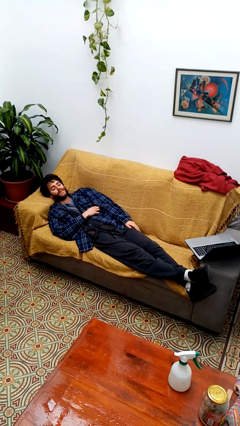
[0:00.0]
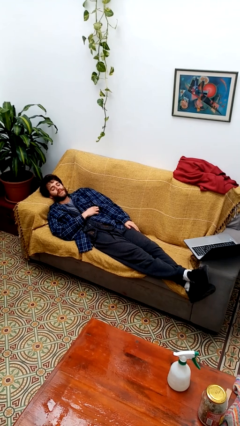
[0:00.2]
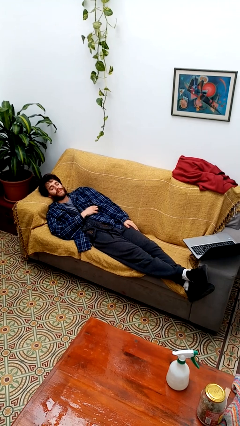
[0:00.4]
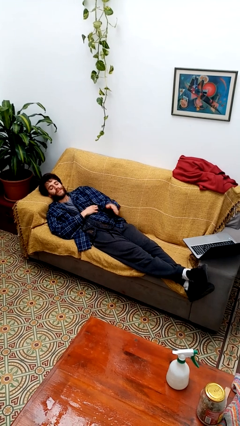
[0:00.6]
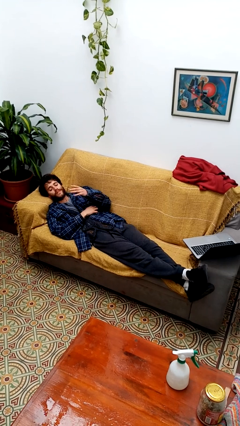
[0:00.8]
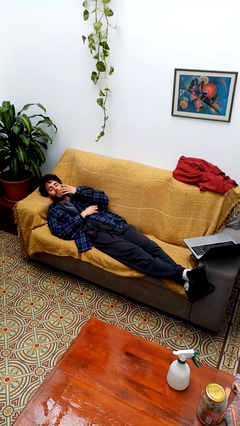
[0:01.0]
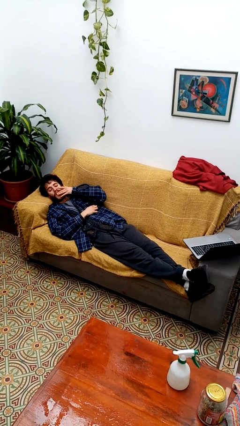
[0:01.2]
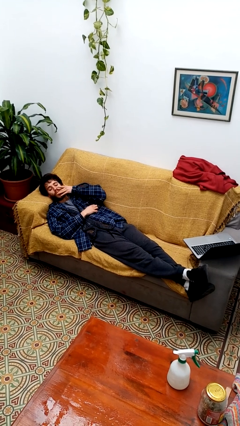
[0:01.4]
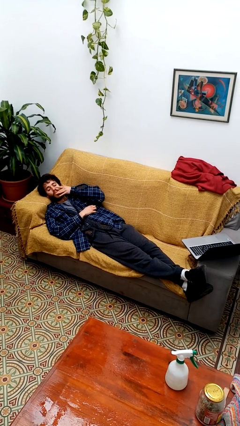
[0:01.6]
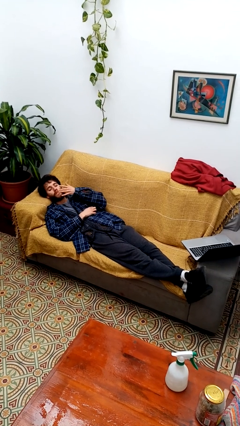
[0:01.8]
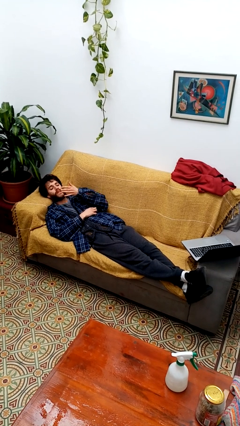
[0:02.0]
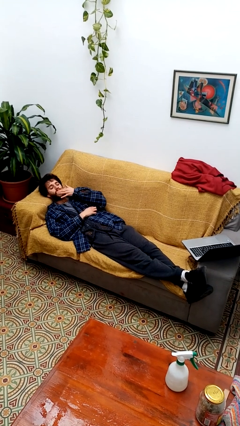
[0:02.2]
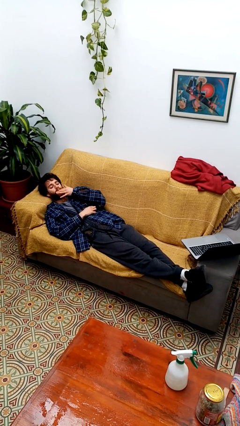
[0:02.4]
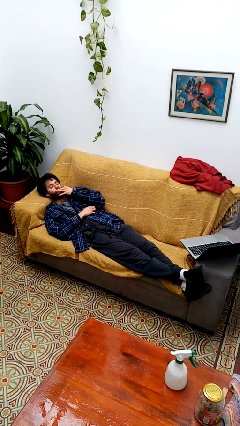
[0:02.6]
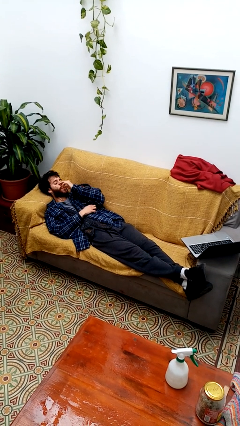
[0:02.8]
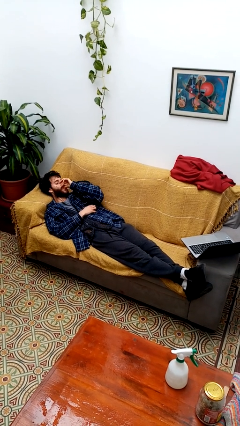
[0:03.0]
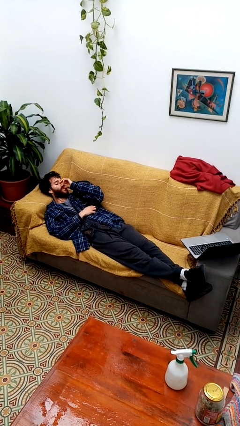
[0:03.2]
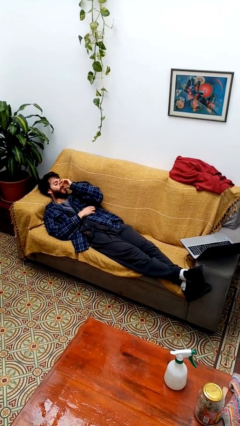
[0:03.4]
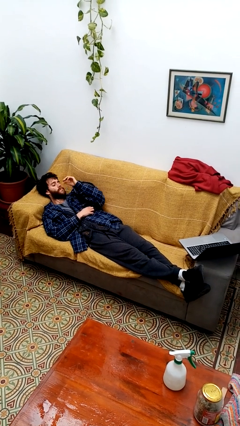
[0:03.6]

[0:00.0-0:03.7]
person licks fingers

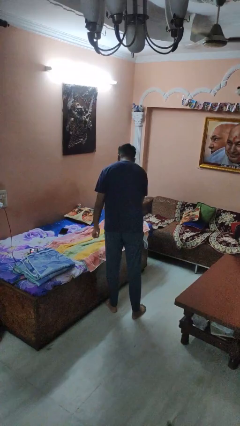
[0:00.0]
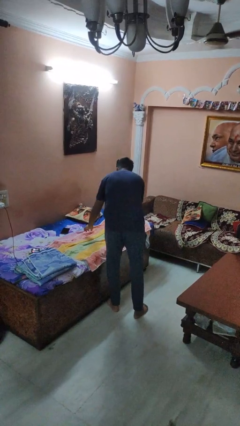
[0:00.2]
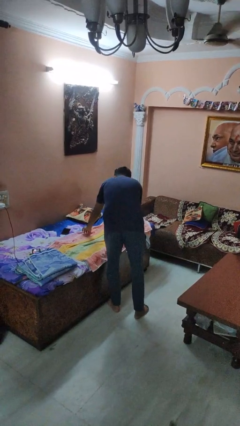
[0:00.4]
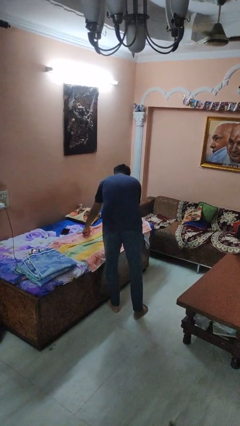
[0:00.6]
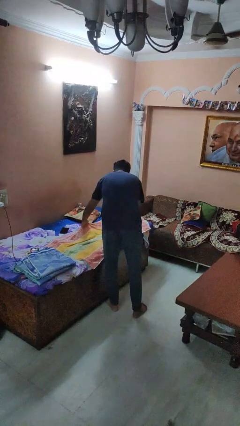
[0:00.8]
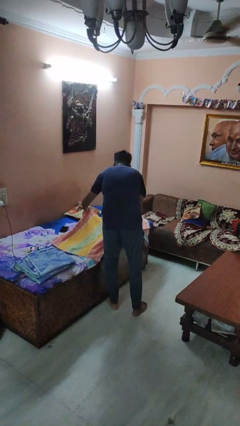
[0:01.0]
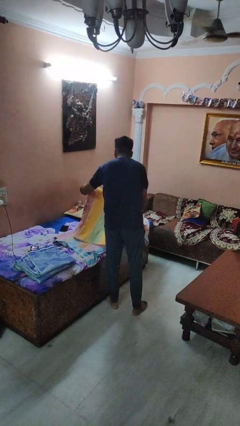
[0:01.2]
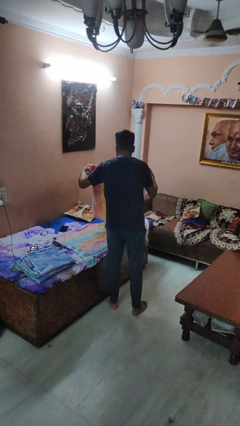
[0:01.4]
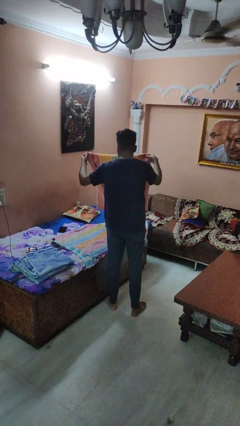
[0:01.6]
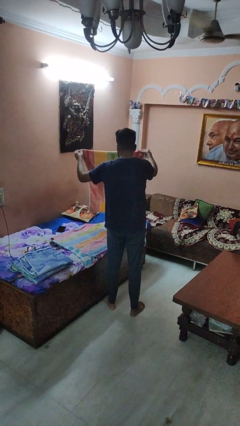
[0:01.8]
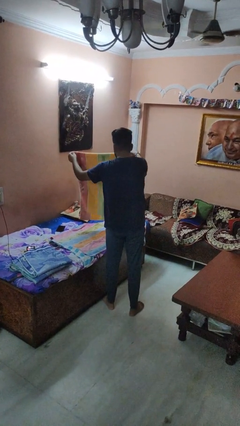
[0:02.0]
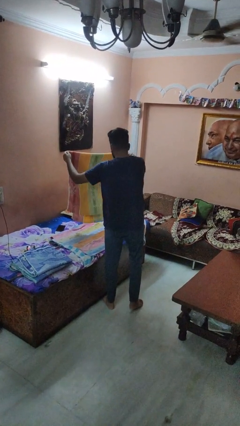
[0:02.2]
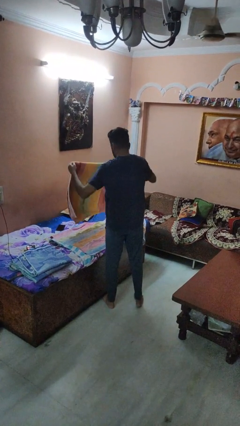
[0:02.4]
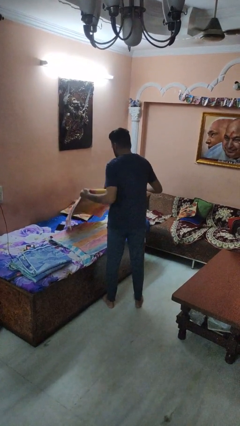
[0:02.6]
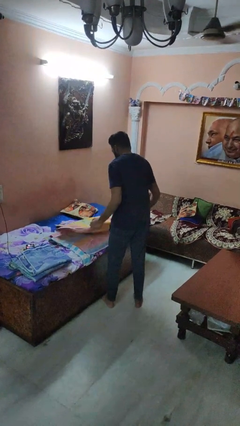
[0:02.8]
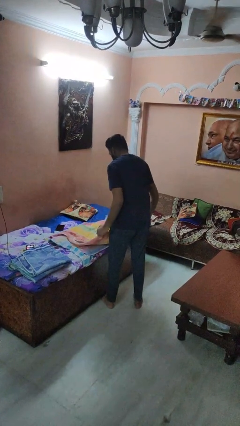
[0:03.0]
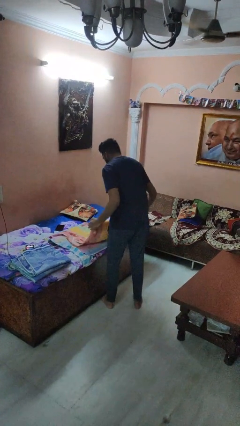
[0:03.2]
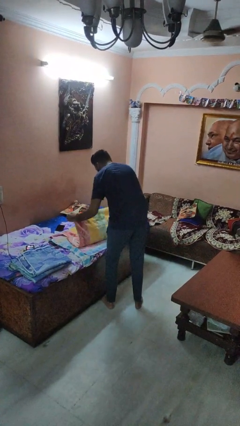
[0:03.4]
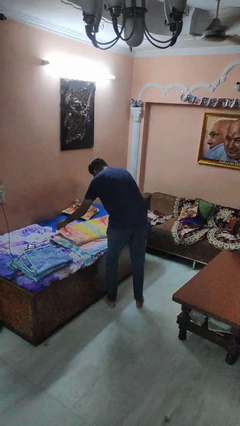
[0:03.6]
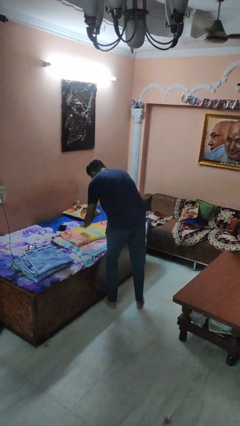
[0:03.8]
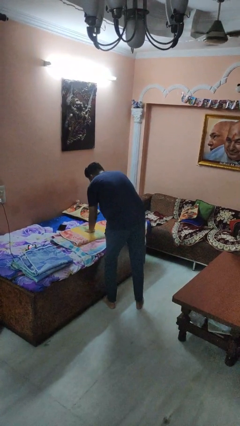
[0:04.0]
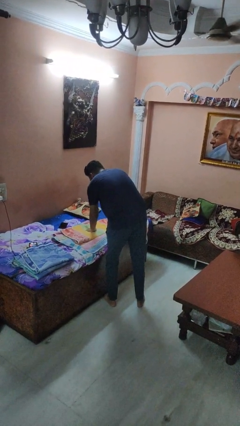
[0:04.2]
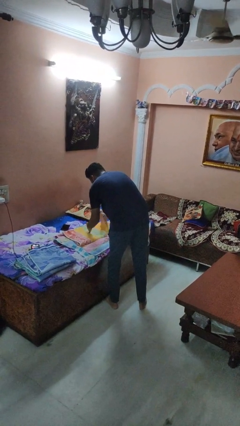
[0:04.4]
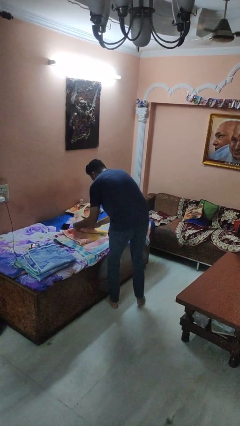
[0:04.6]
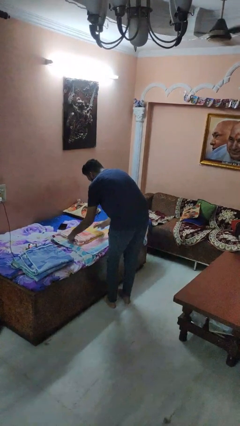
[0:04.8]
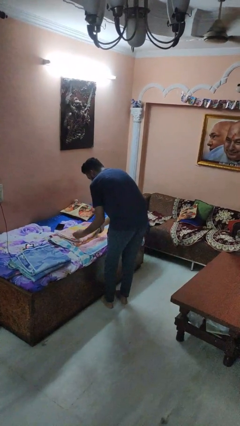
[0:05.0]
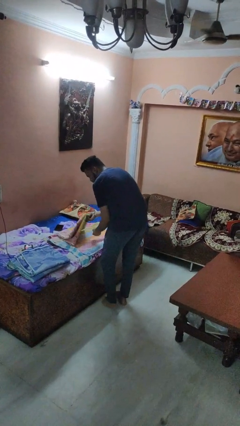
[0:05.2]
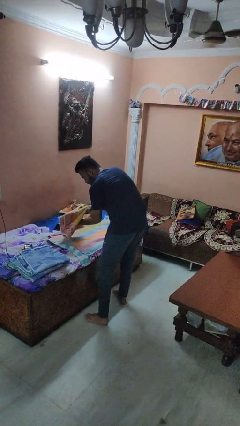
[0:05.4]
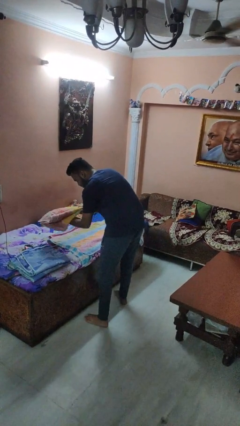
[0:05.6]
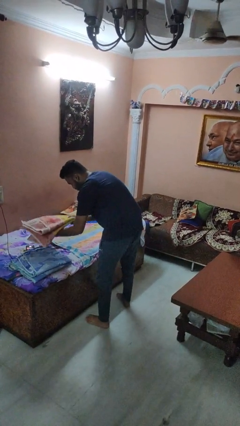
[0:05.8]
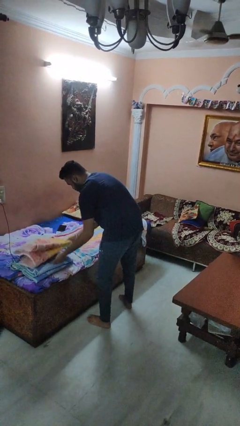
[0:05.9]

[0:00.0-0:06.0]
person folds towel

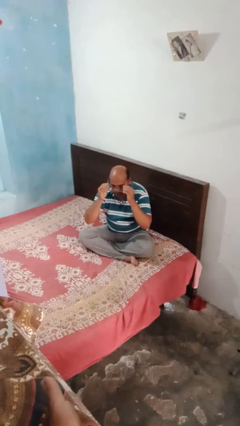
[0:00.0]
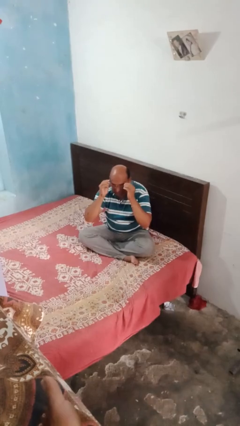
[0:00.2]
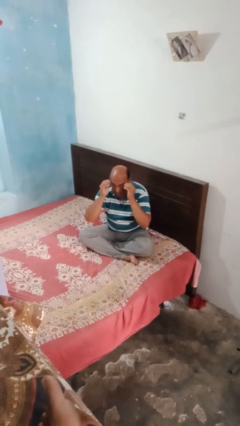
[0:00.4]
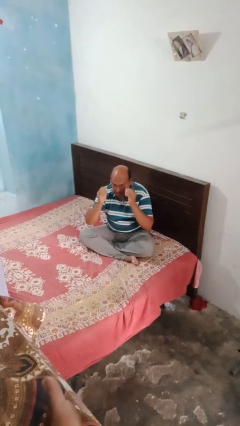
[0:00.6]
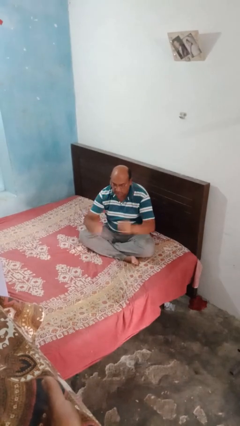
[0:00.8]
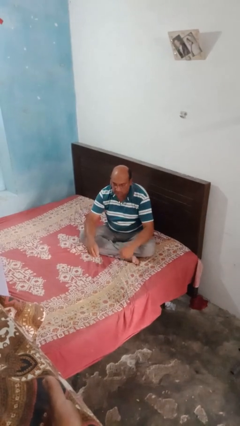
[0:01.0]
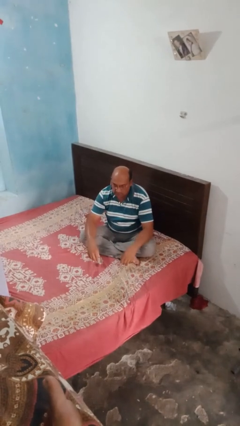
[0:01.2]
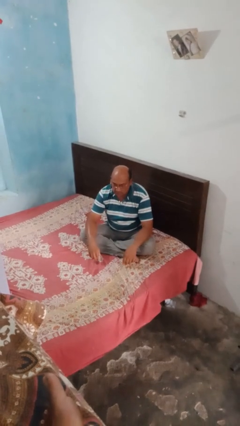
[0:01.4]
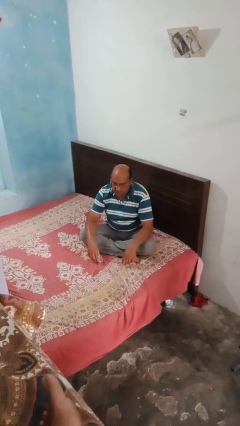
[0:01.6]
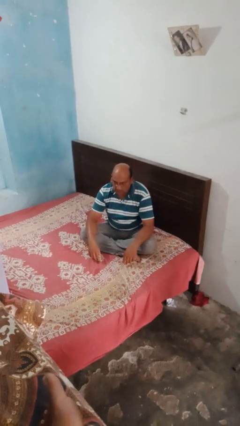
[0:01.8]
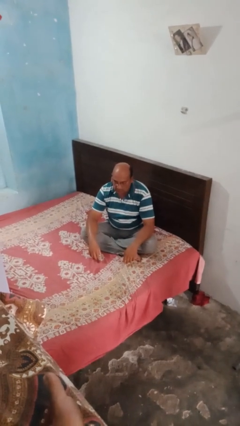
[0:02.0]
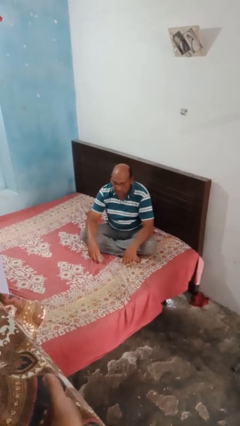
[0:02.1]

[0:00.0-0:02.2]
person puts on glasses

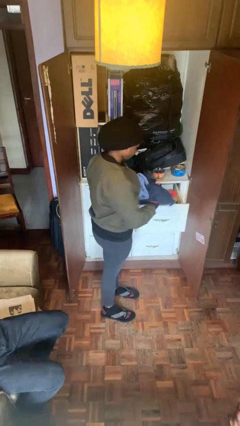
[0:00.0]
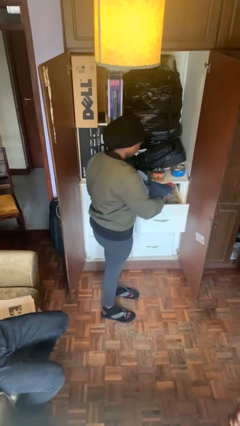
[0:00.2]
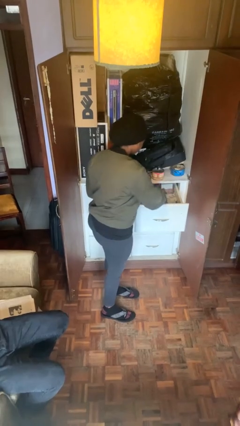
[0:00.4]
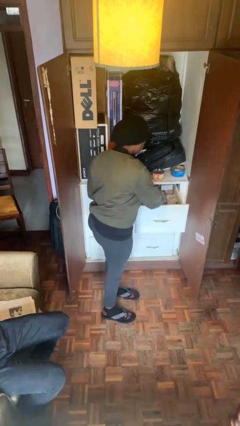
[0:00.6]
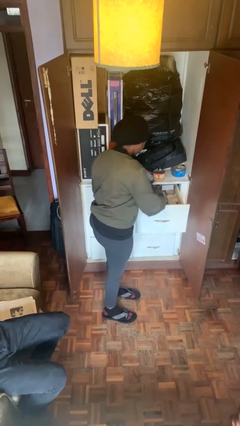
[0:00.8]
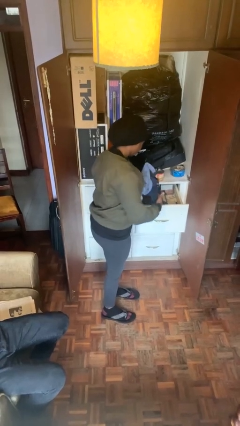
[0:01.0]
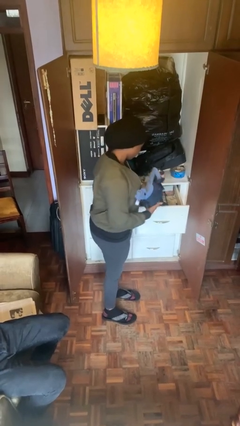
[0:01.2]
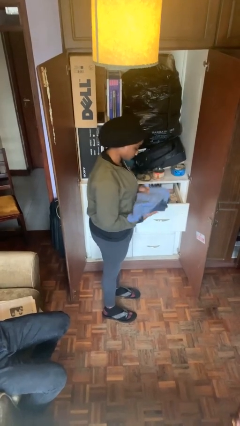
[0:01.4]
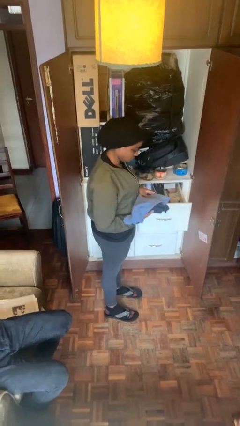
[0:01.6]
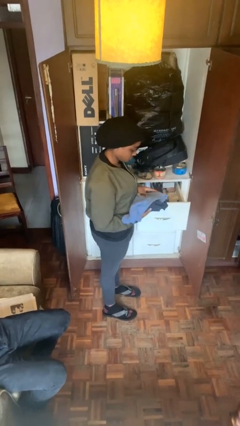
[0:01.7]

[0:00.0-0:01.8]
person puts clothes into dresser

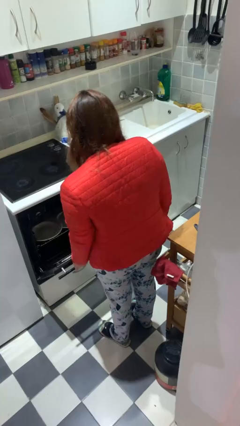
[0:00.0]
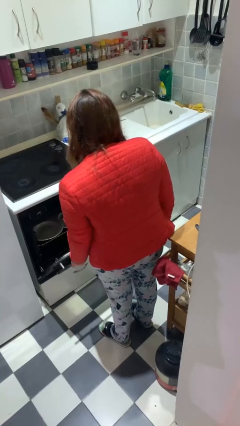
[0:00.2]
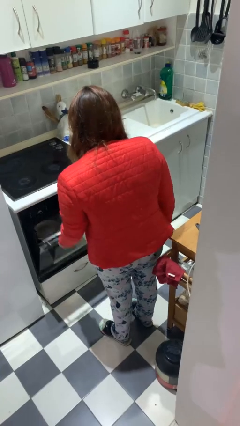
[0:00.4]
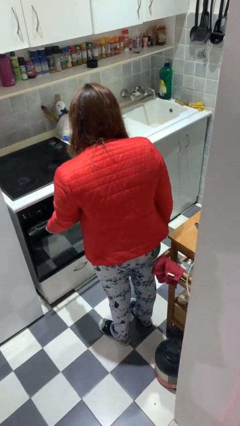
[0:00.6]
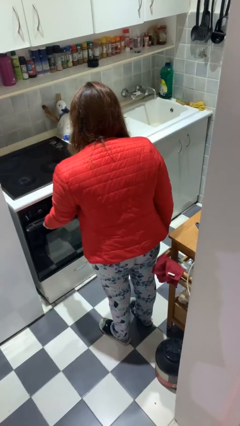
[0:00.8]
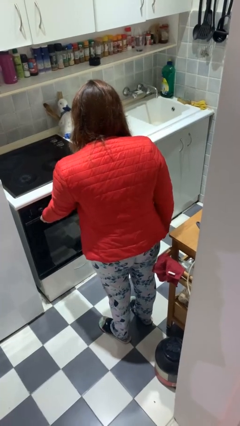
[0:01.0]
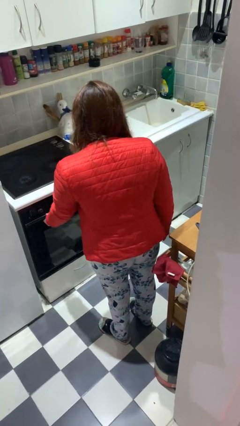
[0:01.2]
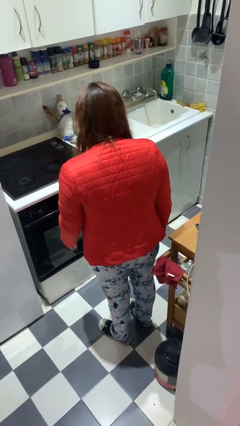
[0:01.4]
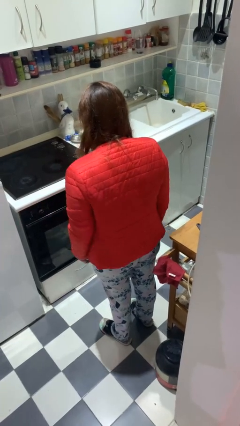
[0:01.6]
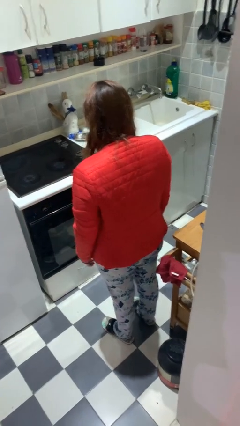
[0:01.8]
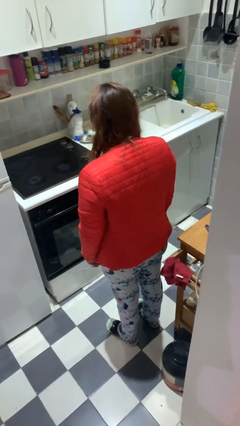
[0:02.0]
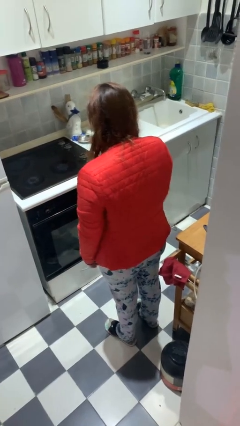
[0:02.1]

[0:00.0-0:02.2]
person closes dishwasher

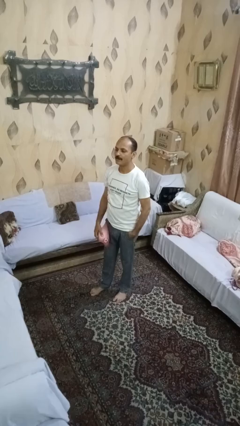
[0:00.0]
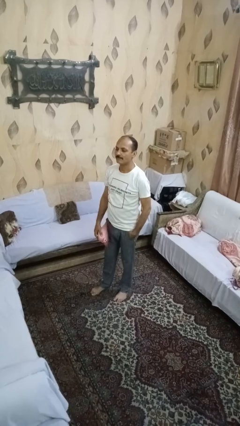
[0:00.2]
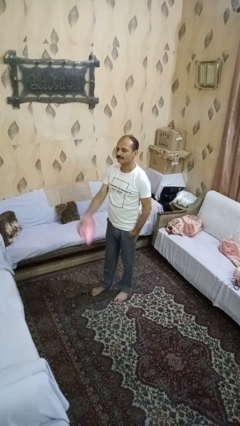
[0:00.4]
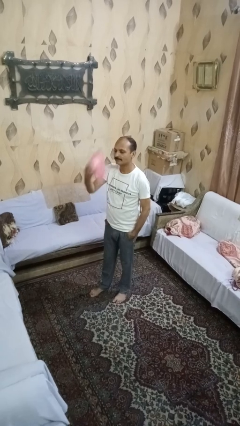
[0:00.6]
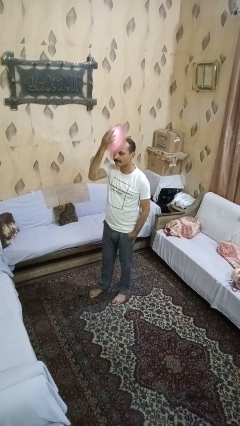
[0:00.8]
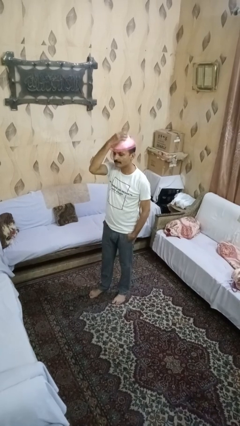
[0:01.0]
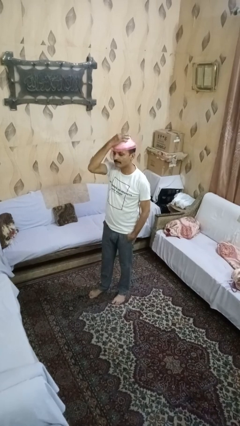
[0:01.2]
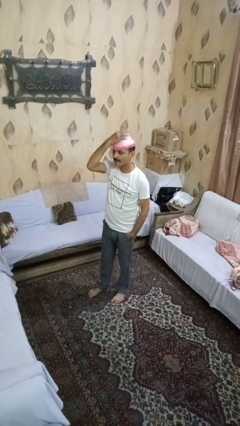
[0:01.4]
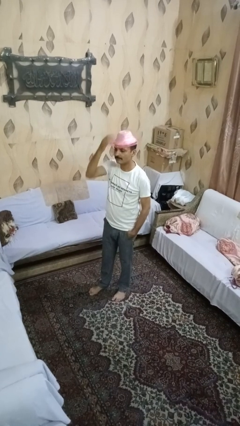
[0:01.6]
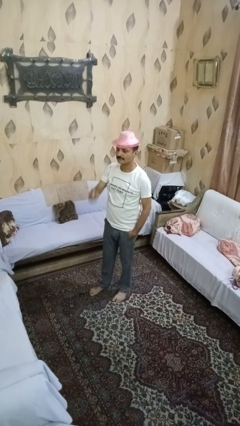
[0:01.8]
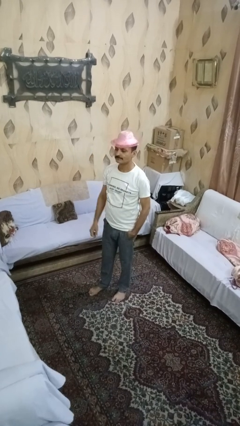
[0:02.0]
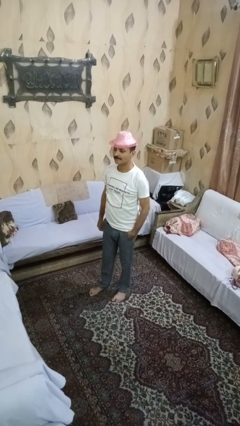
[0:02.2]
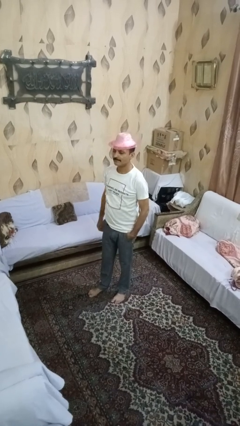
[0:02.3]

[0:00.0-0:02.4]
person puts on hat
